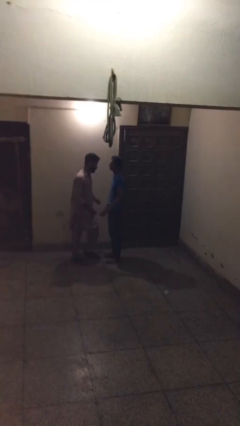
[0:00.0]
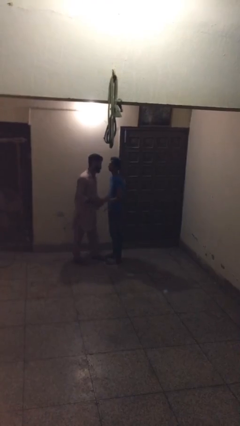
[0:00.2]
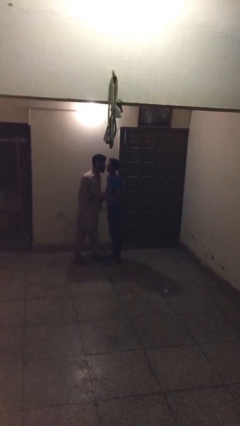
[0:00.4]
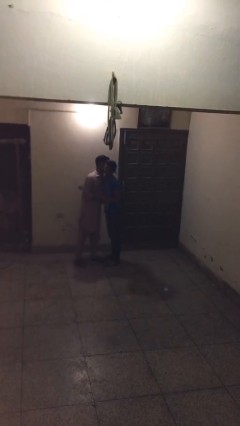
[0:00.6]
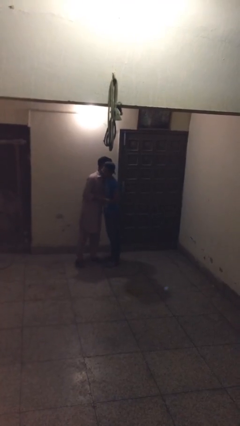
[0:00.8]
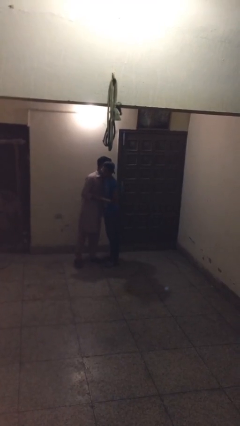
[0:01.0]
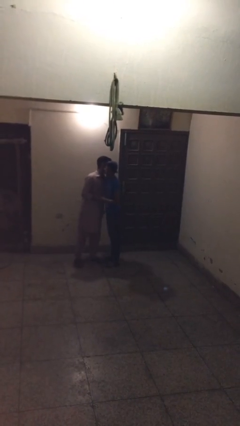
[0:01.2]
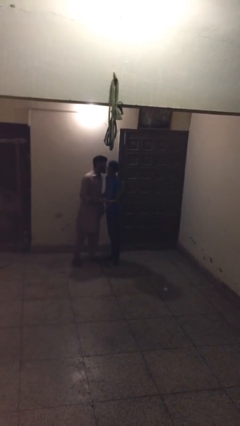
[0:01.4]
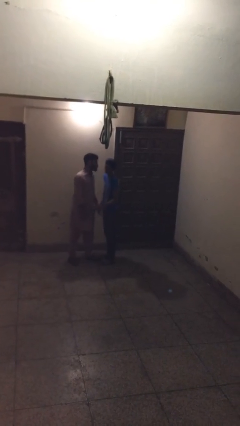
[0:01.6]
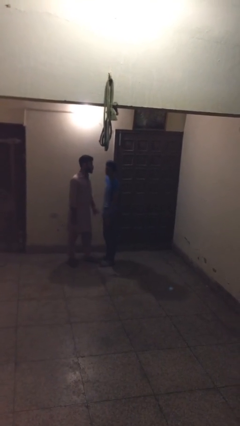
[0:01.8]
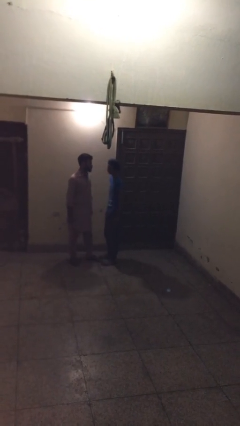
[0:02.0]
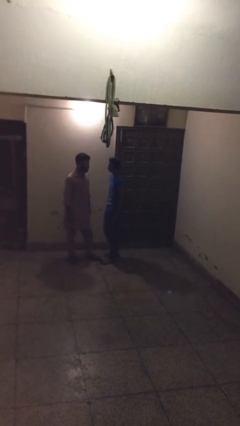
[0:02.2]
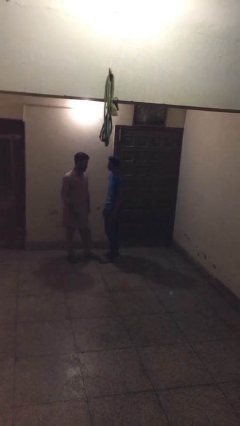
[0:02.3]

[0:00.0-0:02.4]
person embraces person

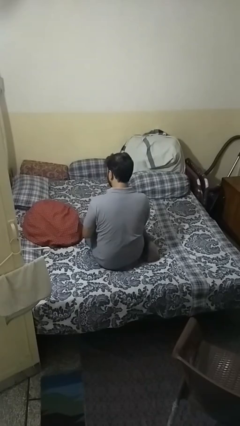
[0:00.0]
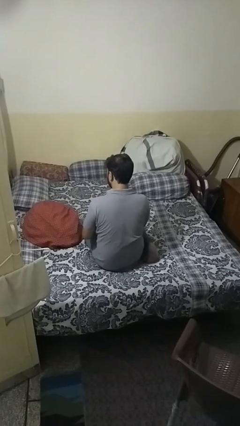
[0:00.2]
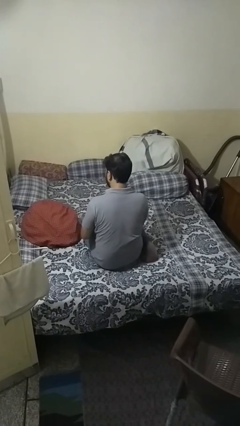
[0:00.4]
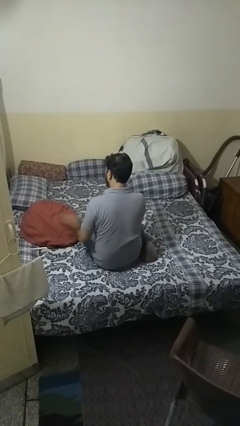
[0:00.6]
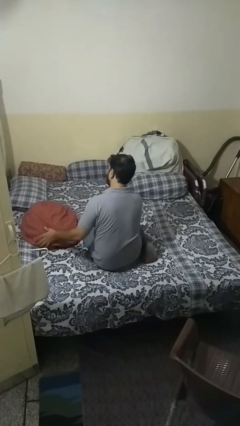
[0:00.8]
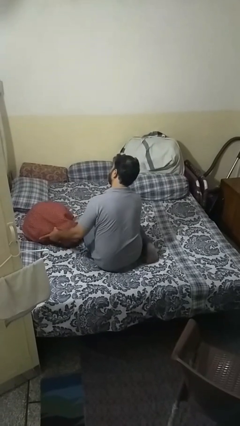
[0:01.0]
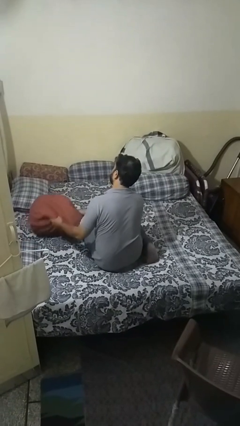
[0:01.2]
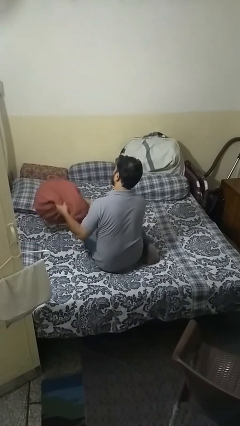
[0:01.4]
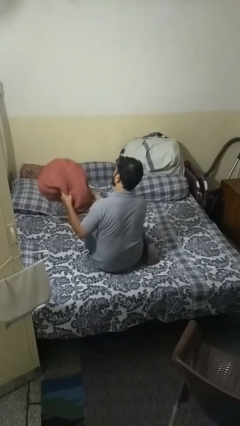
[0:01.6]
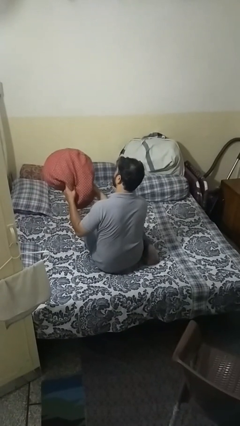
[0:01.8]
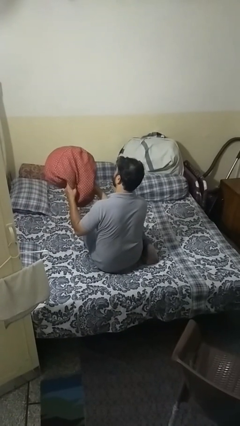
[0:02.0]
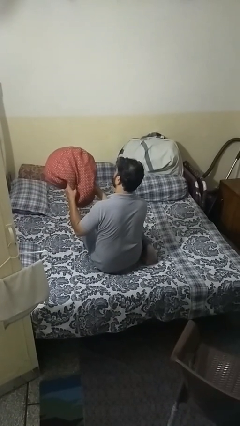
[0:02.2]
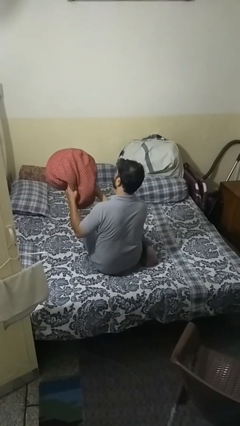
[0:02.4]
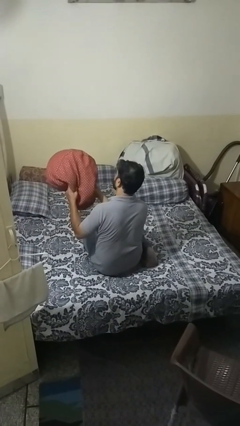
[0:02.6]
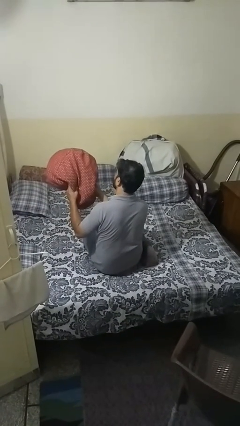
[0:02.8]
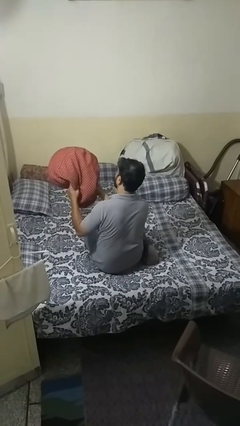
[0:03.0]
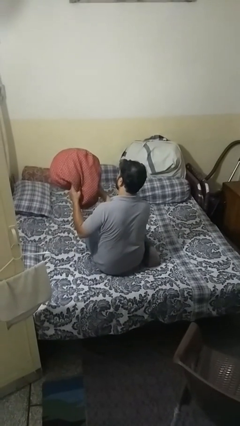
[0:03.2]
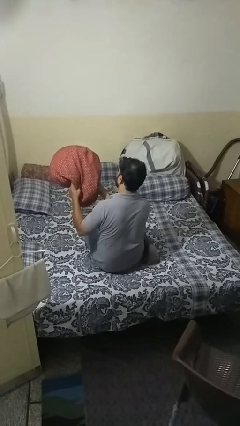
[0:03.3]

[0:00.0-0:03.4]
person picks up object from bed

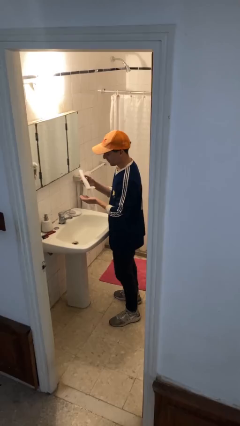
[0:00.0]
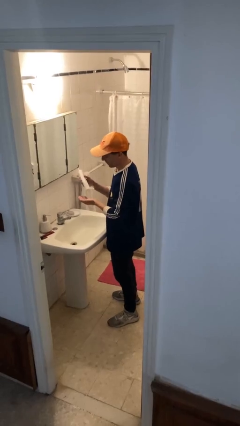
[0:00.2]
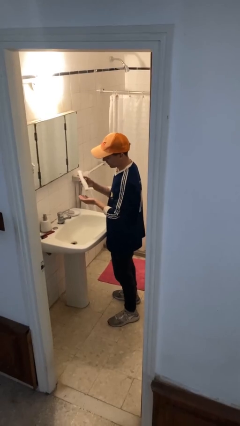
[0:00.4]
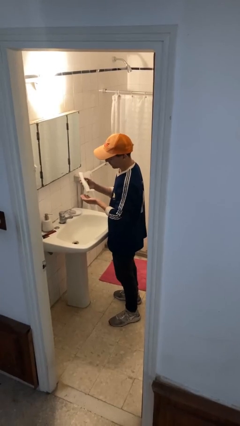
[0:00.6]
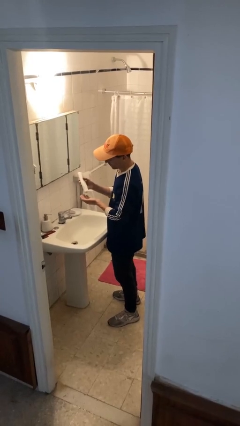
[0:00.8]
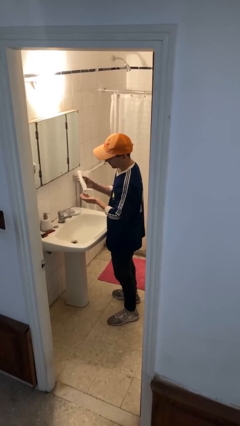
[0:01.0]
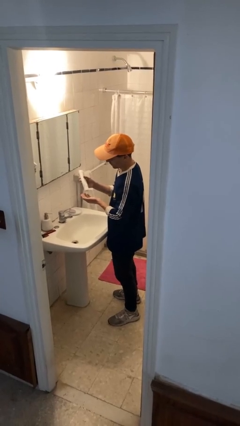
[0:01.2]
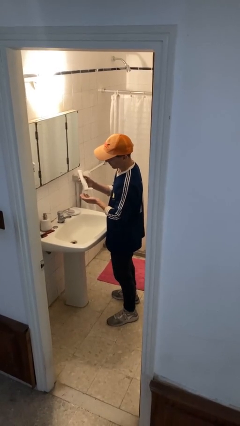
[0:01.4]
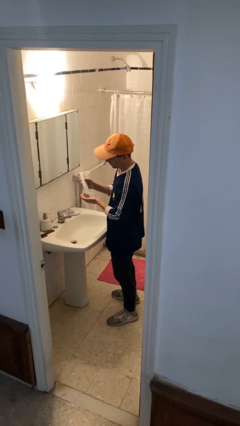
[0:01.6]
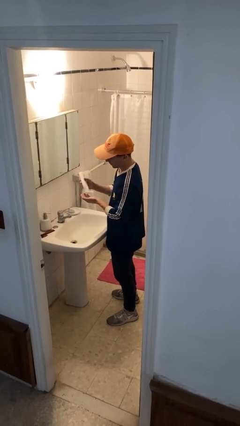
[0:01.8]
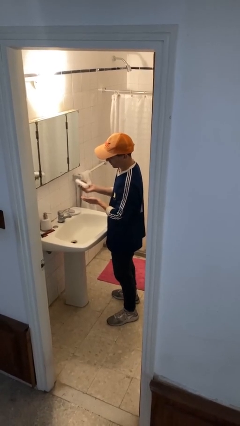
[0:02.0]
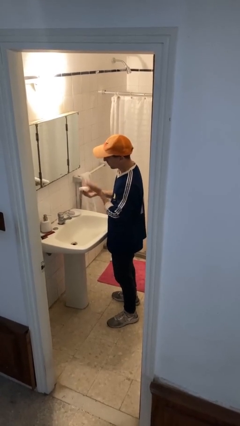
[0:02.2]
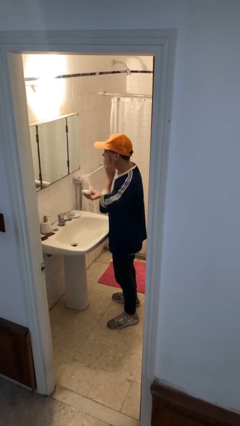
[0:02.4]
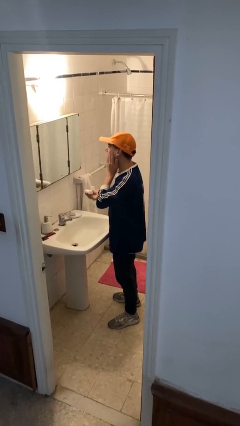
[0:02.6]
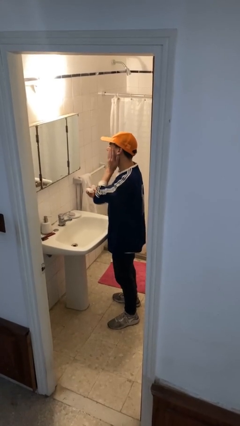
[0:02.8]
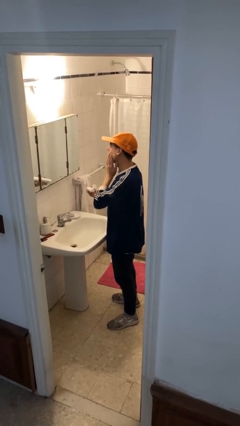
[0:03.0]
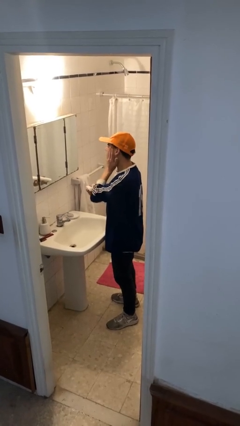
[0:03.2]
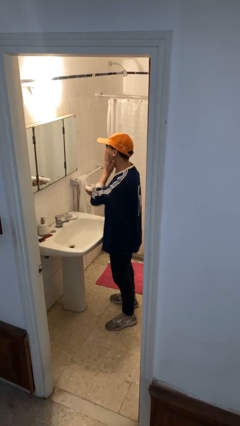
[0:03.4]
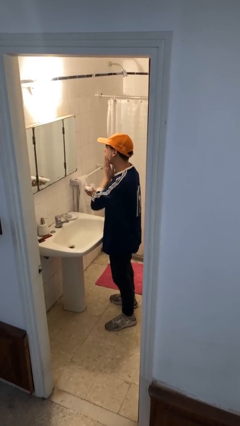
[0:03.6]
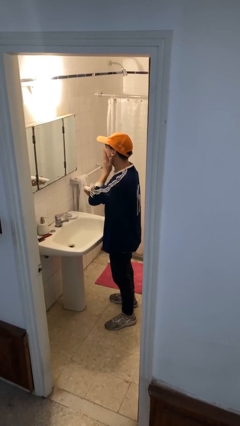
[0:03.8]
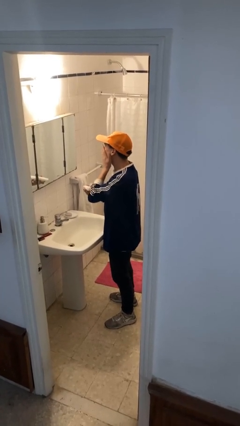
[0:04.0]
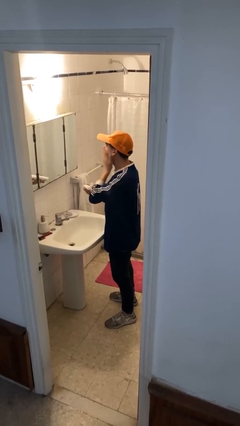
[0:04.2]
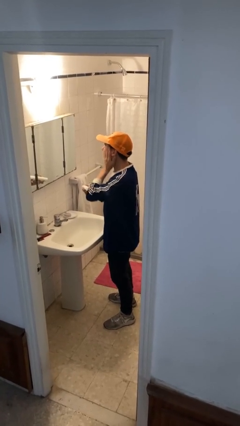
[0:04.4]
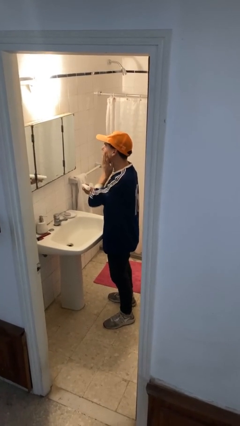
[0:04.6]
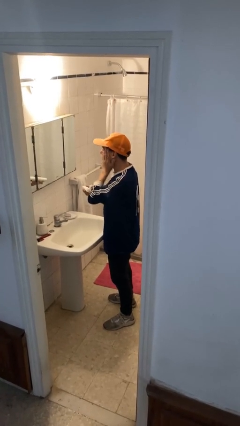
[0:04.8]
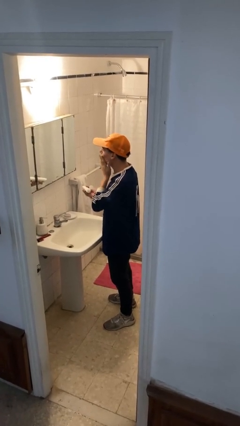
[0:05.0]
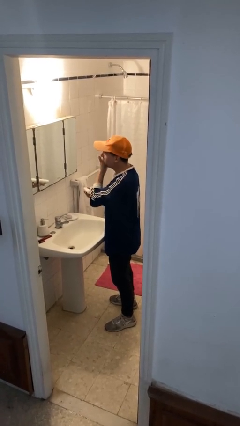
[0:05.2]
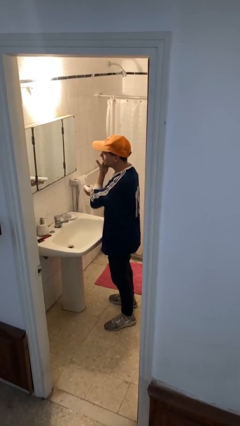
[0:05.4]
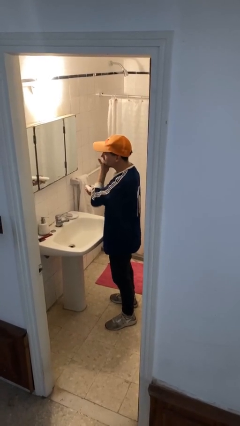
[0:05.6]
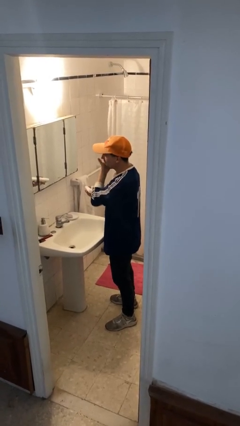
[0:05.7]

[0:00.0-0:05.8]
person applies facial moisturizer

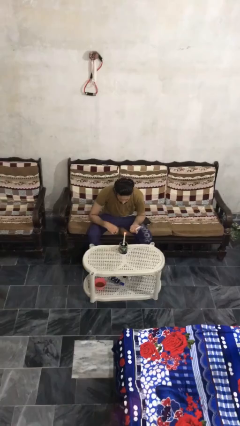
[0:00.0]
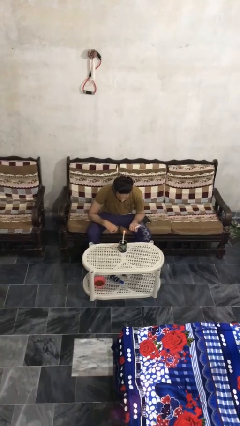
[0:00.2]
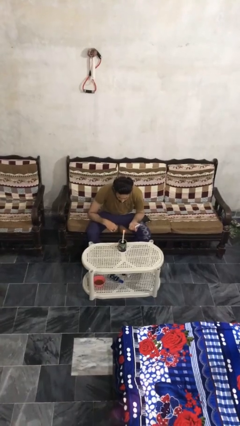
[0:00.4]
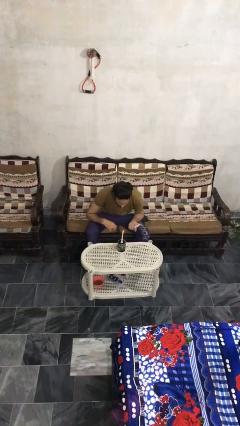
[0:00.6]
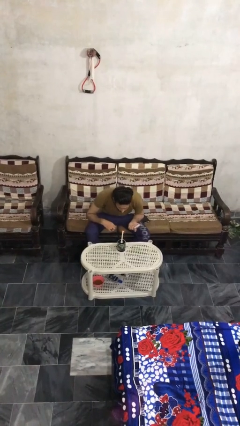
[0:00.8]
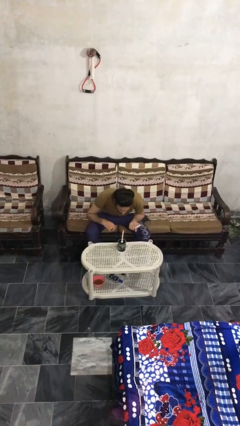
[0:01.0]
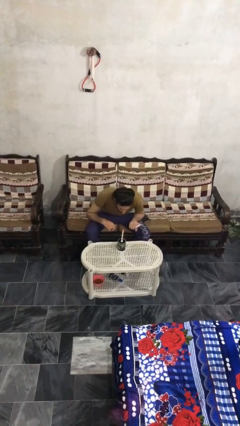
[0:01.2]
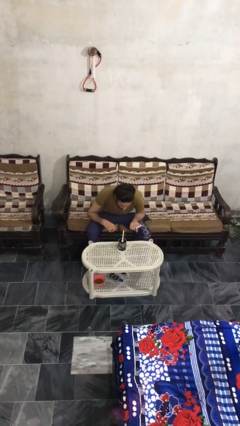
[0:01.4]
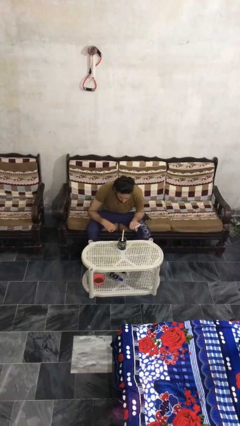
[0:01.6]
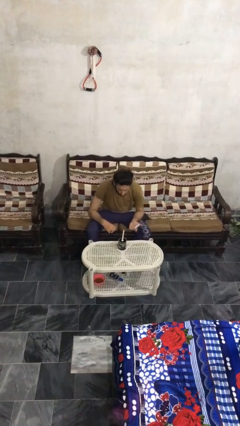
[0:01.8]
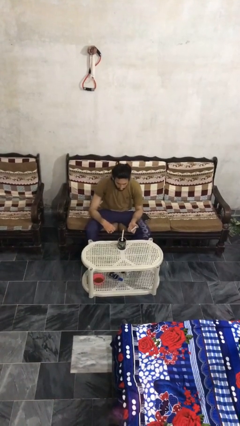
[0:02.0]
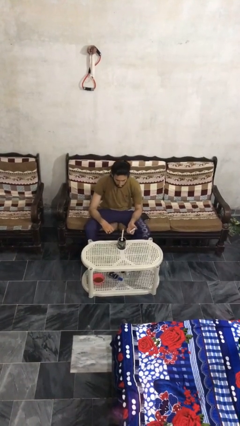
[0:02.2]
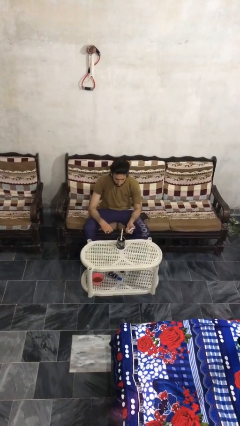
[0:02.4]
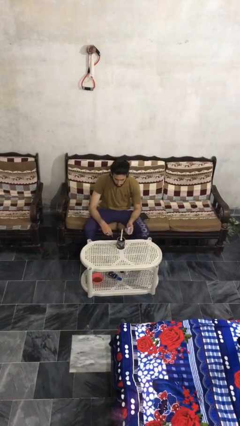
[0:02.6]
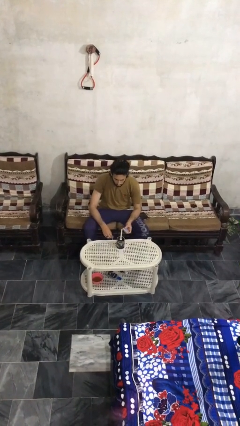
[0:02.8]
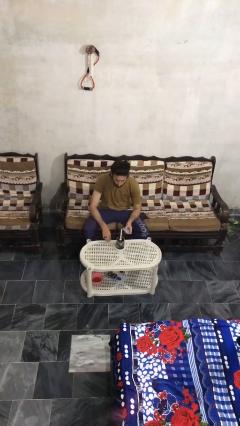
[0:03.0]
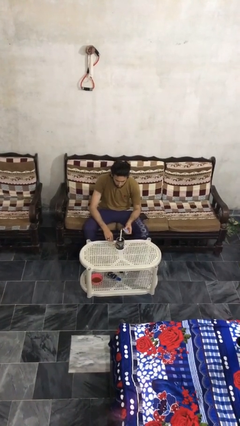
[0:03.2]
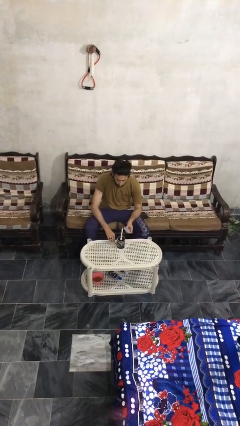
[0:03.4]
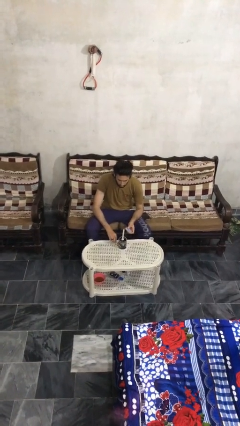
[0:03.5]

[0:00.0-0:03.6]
person extinguishes candle

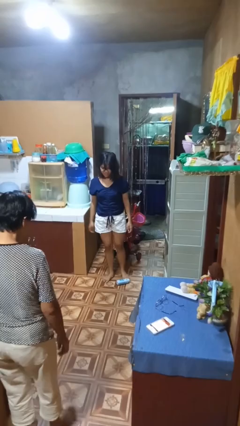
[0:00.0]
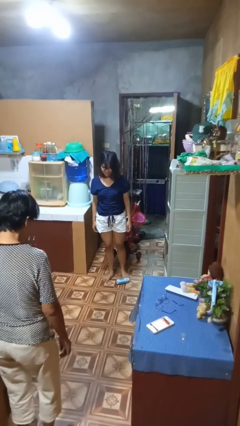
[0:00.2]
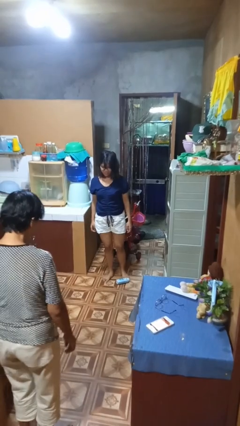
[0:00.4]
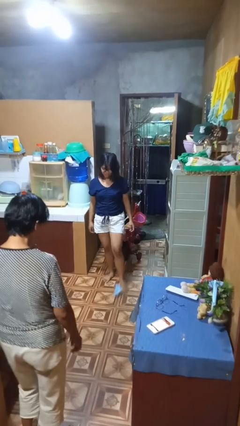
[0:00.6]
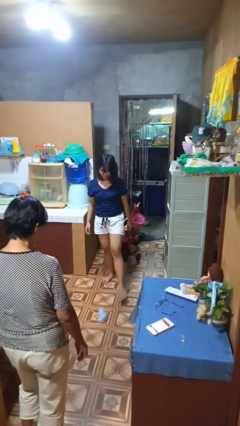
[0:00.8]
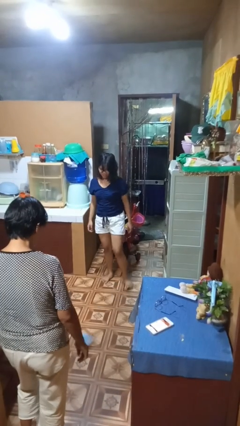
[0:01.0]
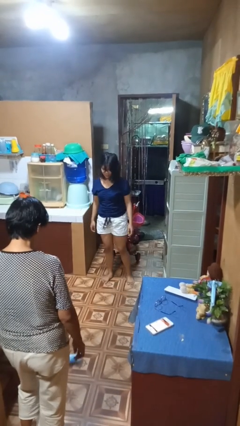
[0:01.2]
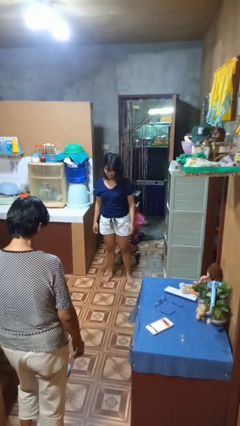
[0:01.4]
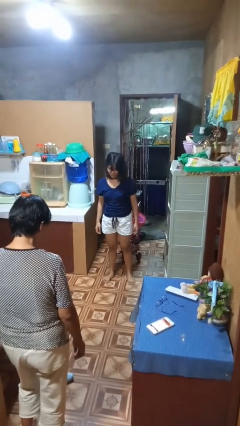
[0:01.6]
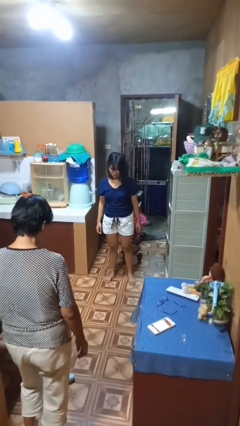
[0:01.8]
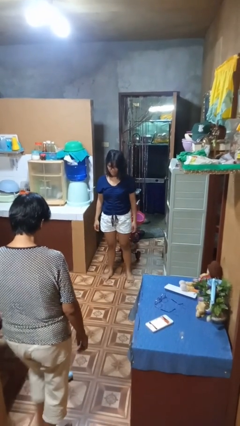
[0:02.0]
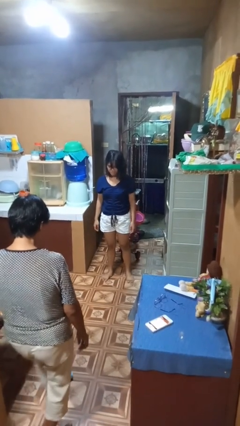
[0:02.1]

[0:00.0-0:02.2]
person kicks object to person

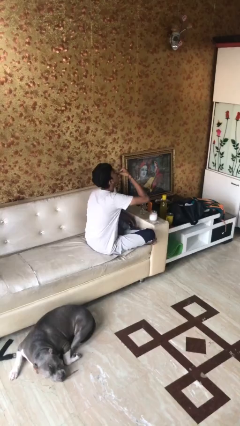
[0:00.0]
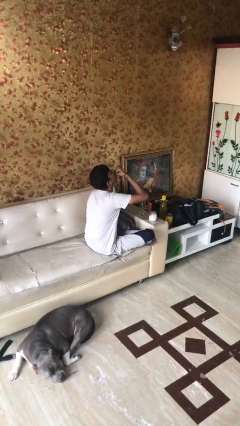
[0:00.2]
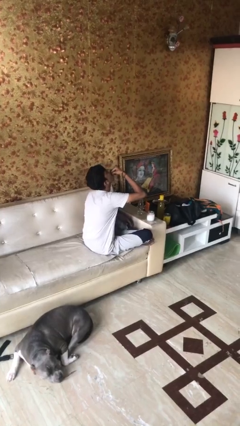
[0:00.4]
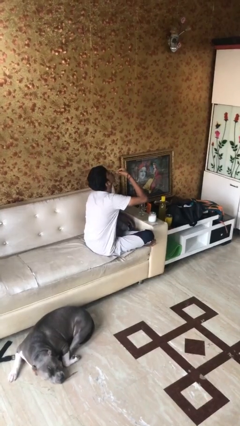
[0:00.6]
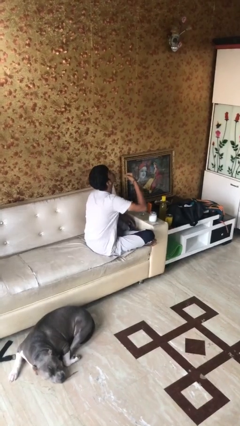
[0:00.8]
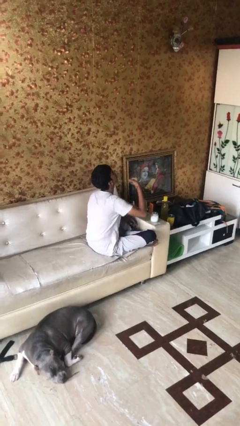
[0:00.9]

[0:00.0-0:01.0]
person takes medicine pills
